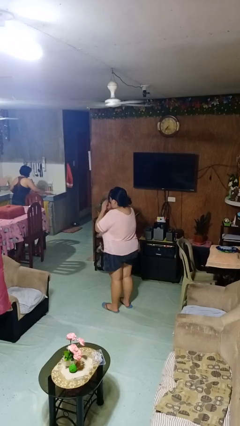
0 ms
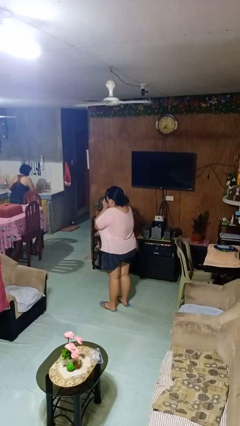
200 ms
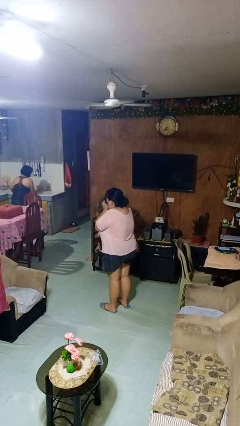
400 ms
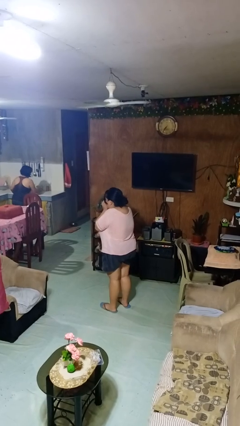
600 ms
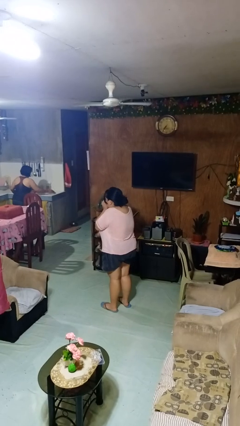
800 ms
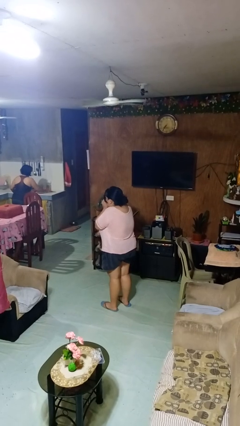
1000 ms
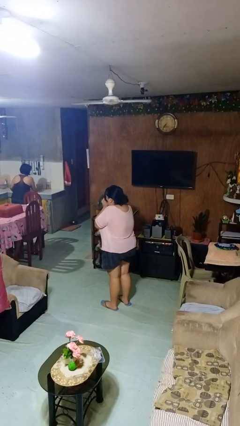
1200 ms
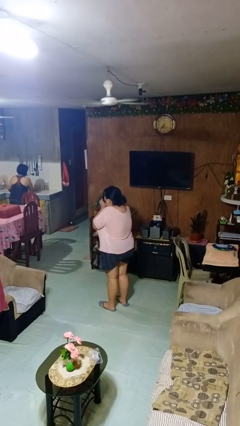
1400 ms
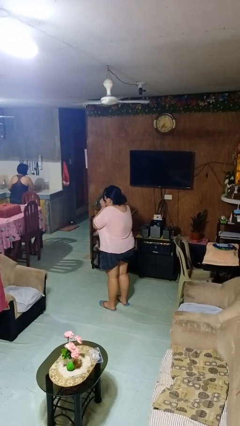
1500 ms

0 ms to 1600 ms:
person blows into hands

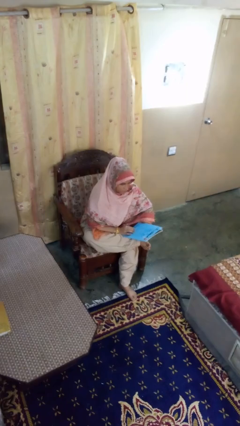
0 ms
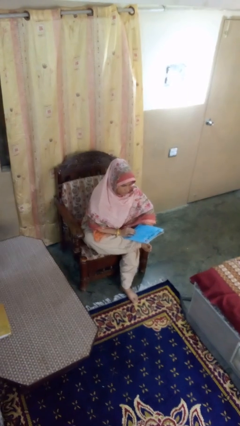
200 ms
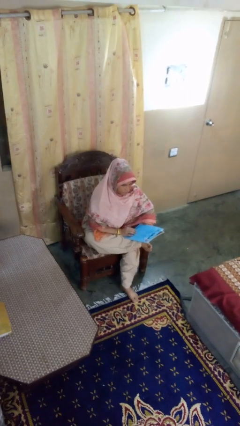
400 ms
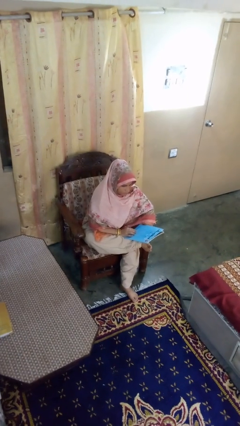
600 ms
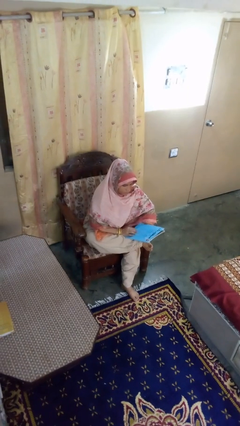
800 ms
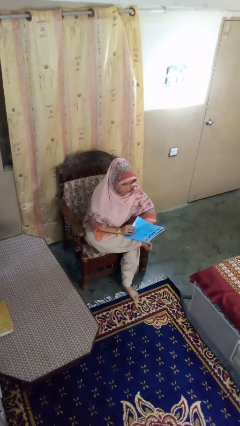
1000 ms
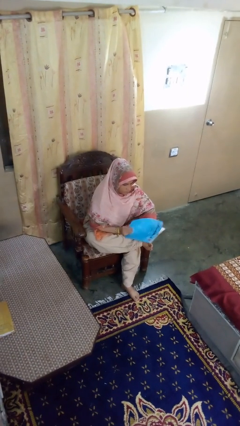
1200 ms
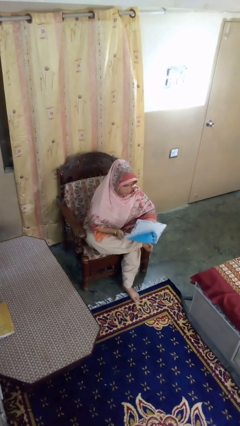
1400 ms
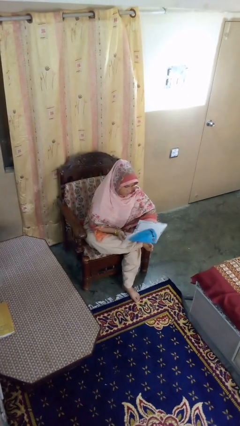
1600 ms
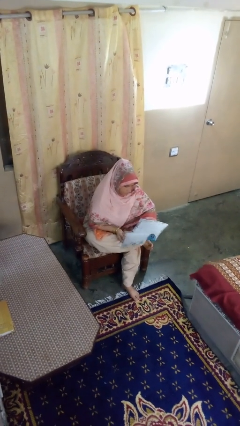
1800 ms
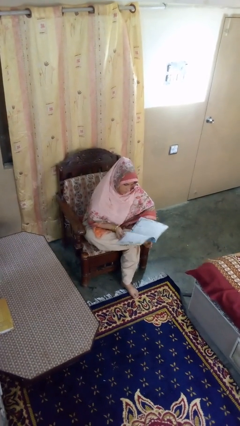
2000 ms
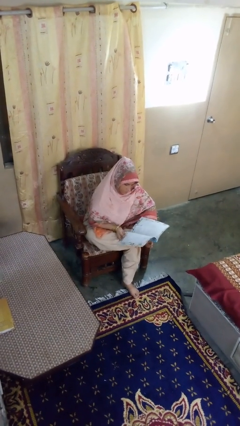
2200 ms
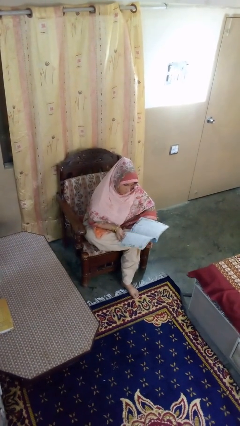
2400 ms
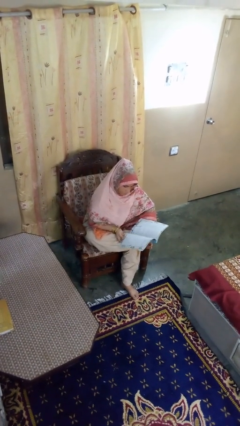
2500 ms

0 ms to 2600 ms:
person reads magazine

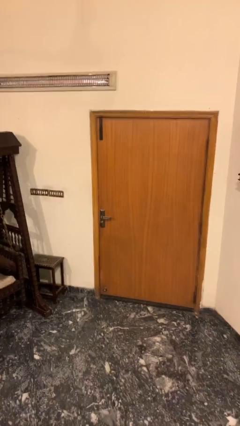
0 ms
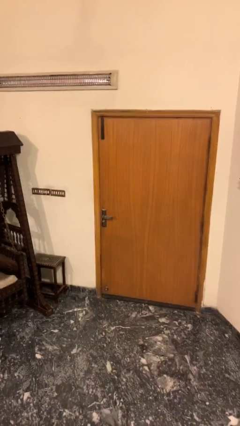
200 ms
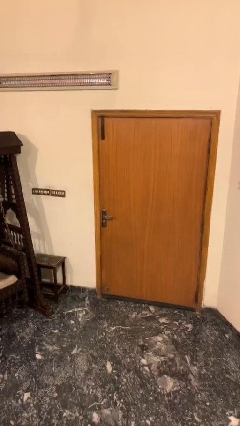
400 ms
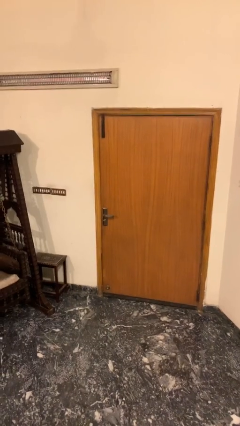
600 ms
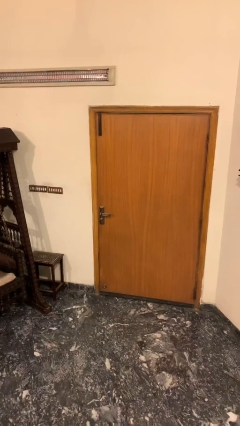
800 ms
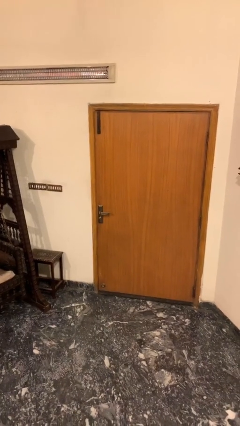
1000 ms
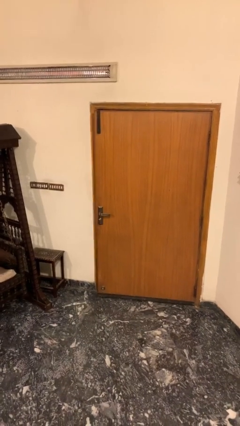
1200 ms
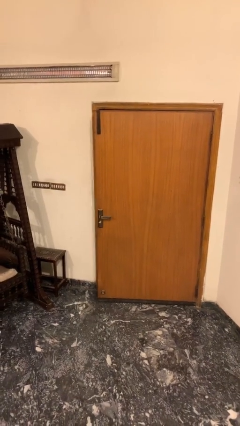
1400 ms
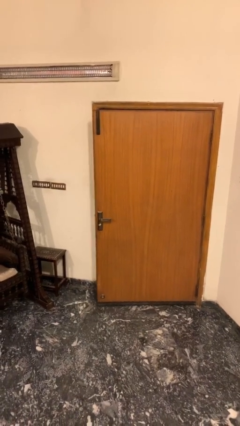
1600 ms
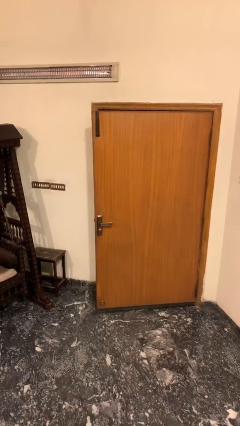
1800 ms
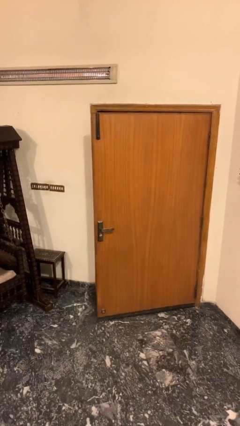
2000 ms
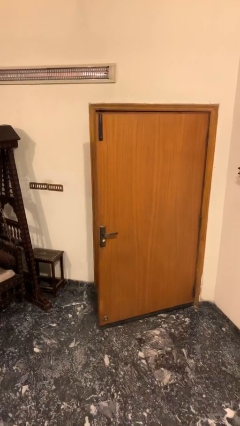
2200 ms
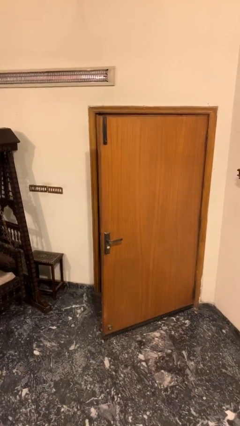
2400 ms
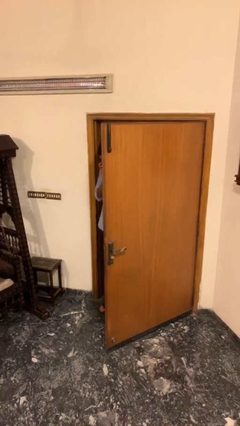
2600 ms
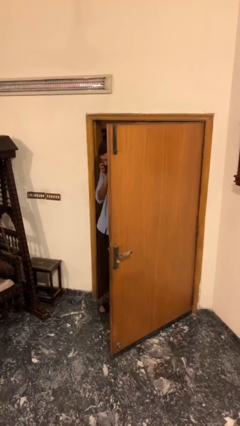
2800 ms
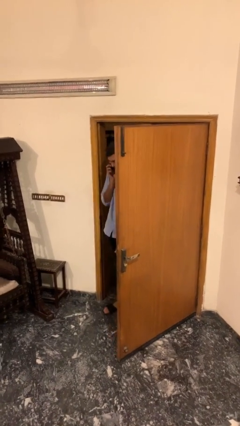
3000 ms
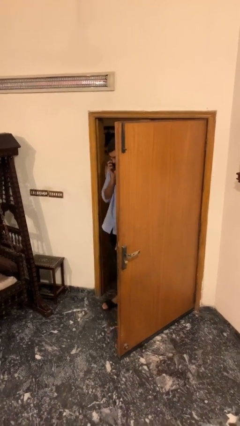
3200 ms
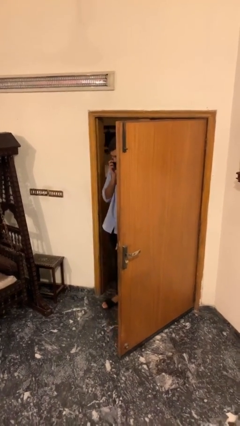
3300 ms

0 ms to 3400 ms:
person opens facility door

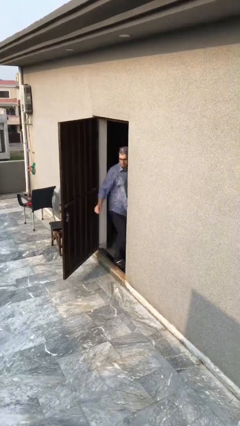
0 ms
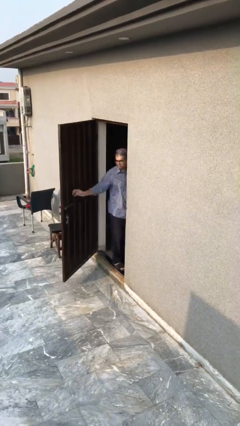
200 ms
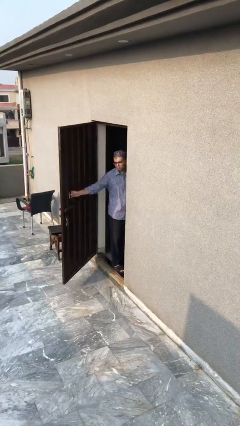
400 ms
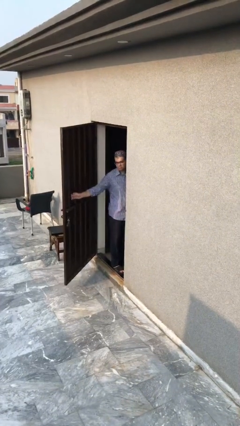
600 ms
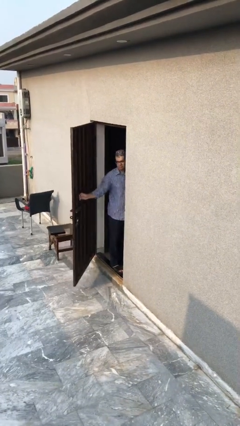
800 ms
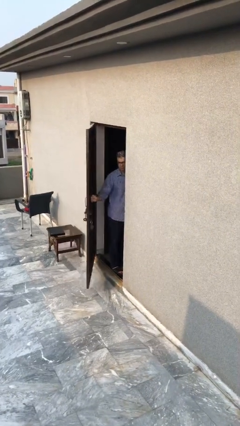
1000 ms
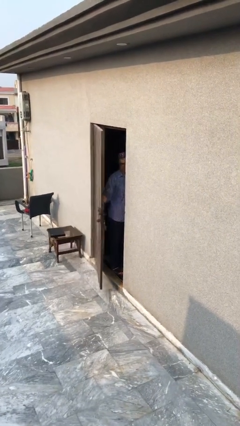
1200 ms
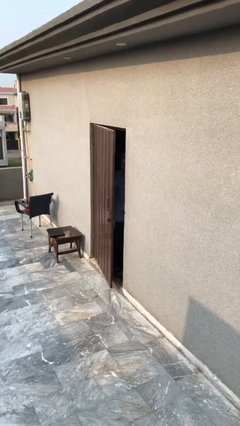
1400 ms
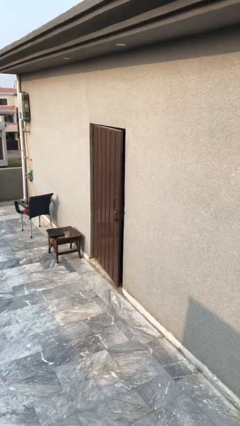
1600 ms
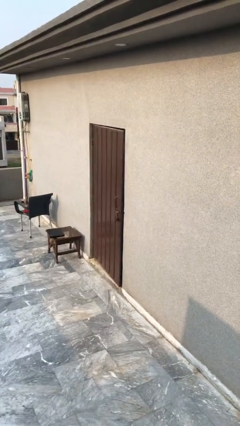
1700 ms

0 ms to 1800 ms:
person closes facility door

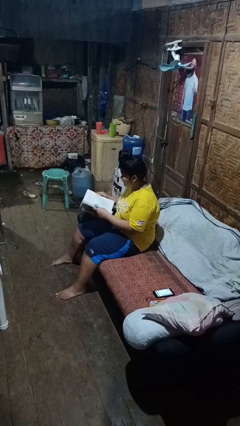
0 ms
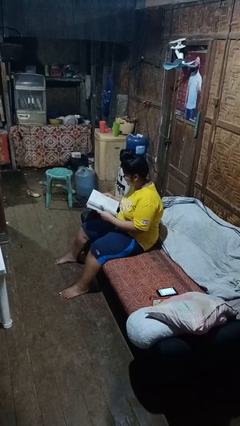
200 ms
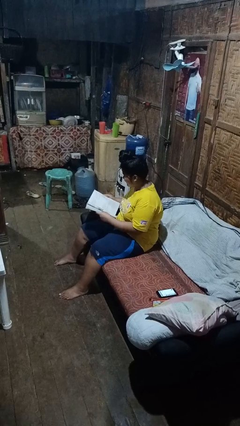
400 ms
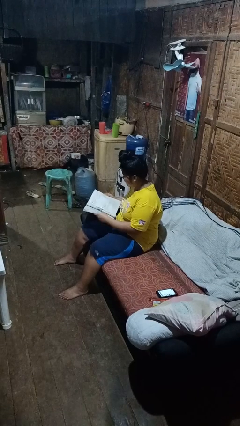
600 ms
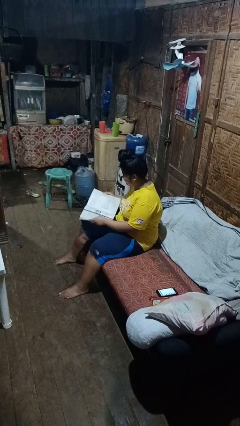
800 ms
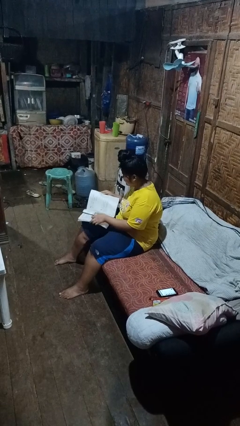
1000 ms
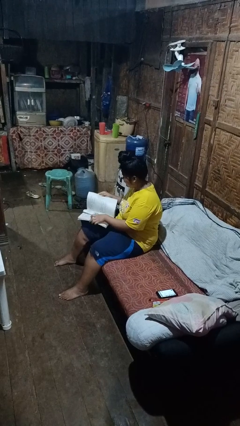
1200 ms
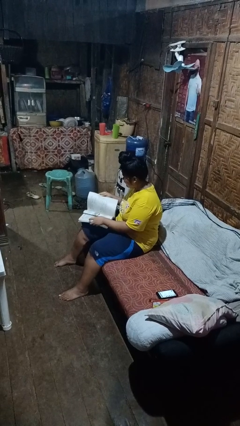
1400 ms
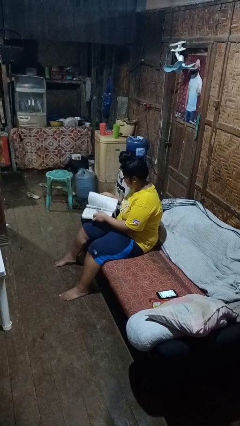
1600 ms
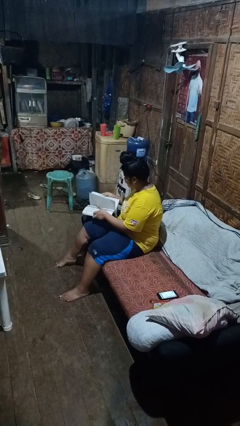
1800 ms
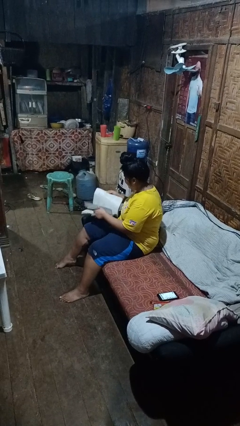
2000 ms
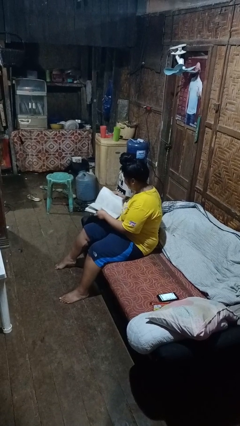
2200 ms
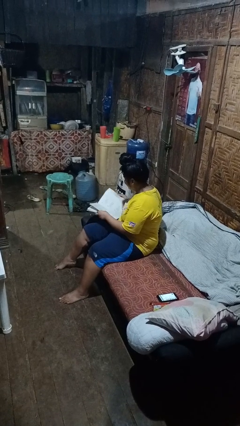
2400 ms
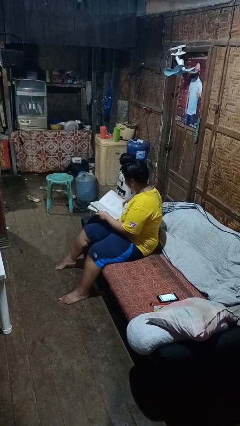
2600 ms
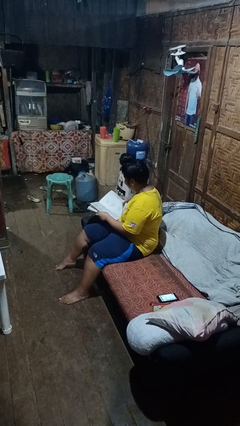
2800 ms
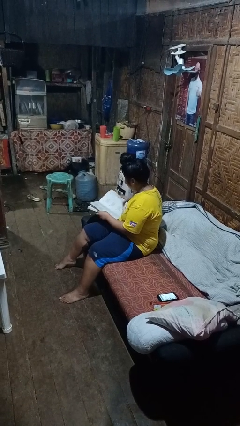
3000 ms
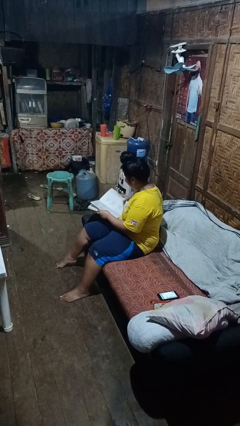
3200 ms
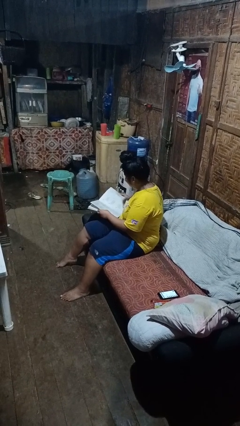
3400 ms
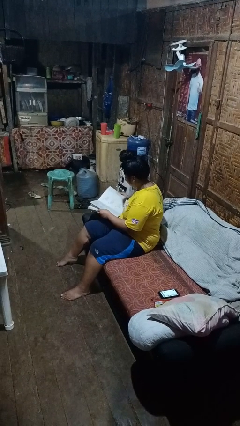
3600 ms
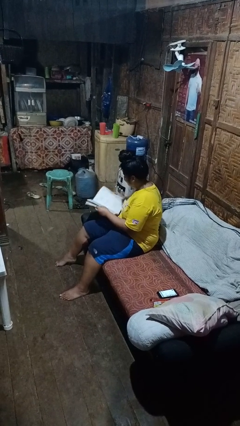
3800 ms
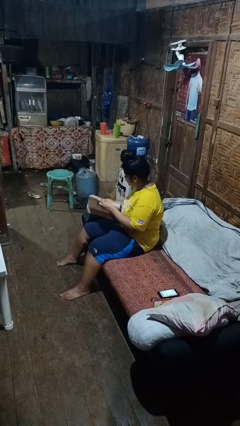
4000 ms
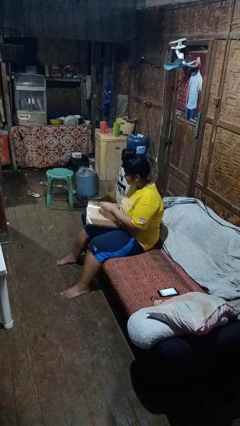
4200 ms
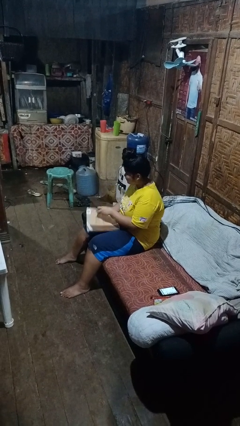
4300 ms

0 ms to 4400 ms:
person reads book

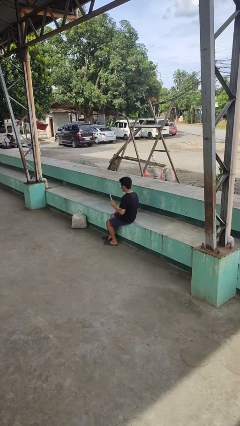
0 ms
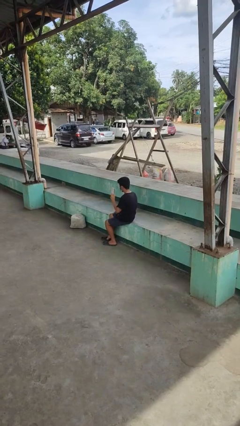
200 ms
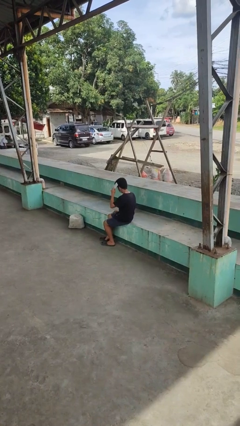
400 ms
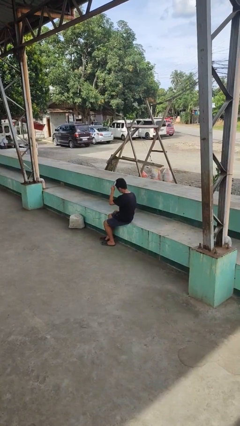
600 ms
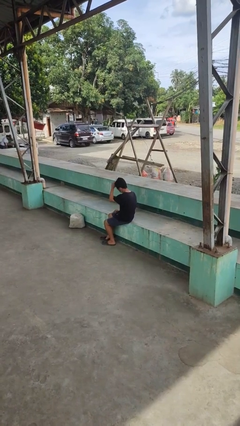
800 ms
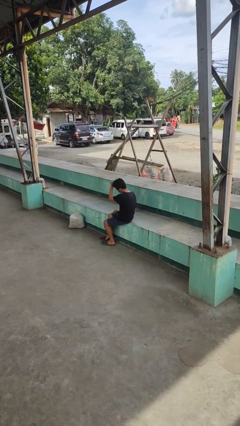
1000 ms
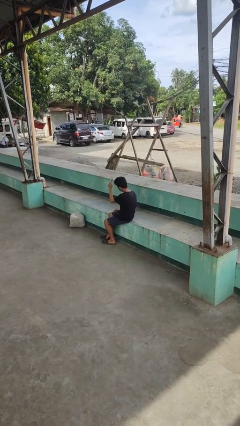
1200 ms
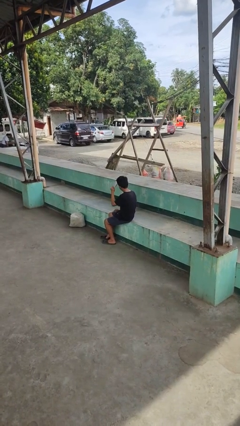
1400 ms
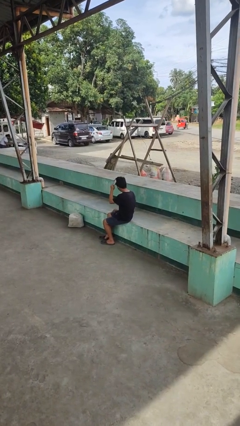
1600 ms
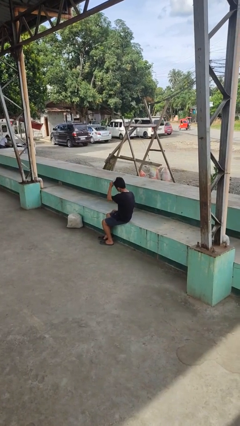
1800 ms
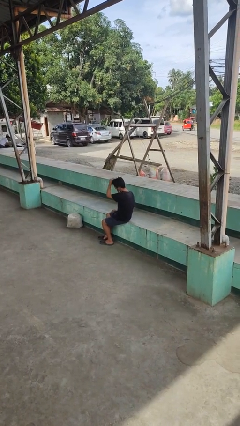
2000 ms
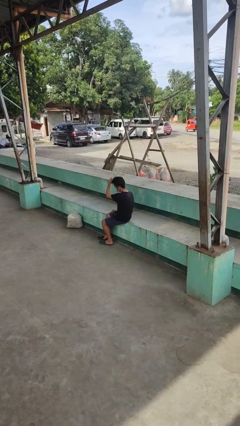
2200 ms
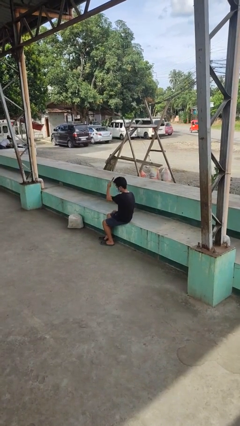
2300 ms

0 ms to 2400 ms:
person brushes hair

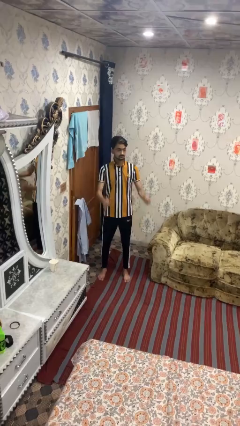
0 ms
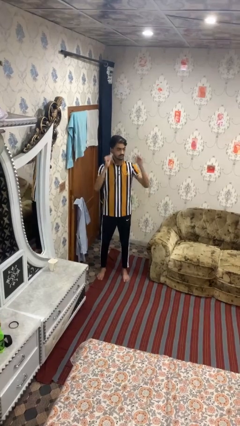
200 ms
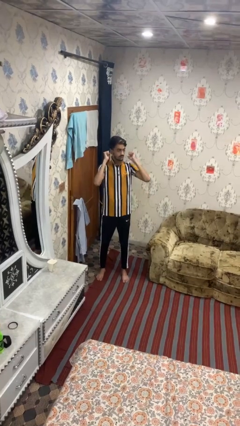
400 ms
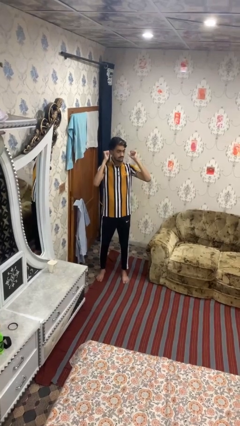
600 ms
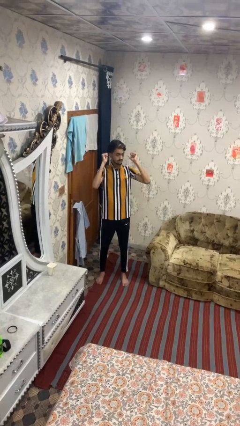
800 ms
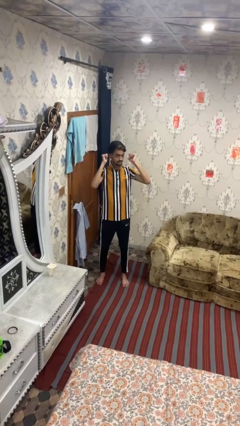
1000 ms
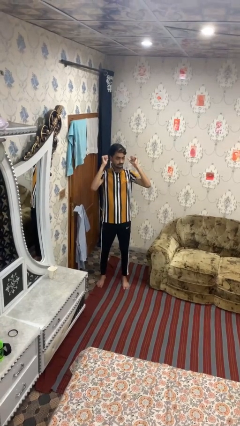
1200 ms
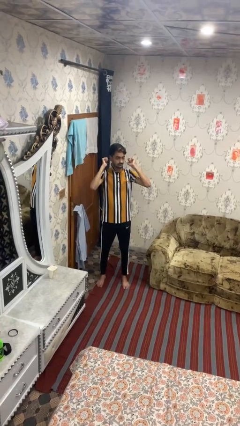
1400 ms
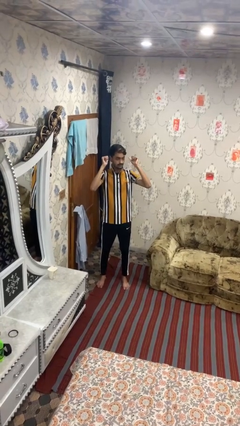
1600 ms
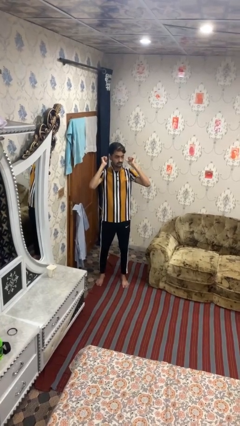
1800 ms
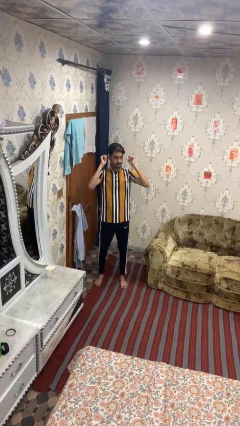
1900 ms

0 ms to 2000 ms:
person gestures behind me
